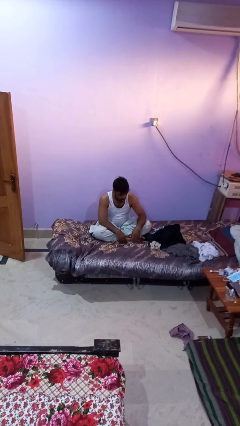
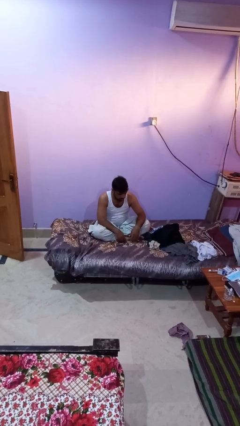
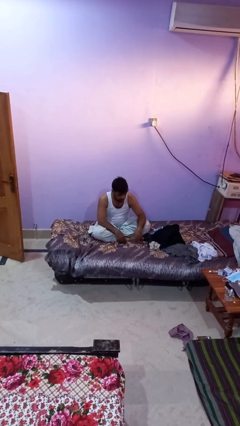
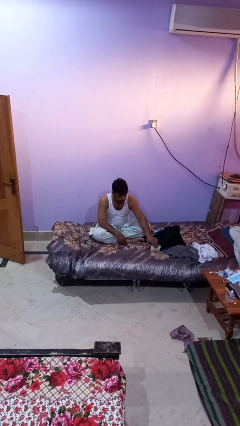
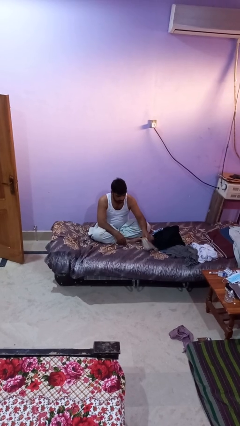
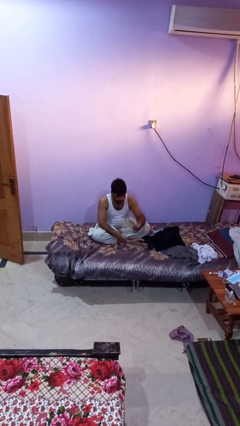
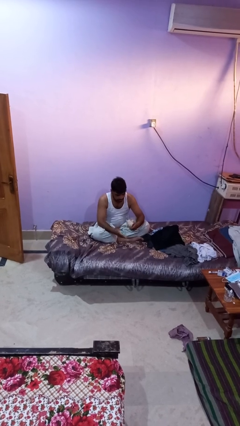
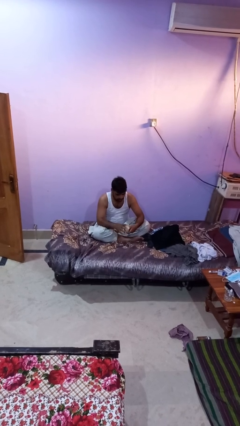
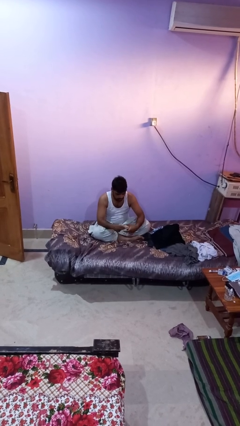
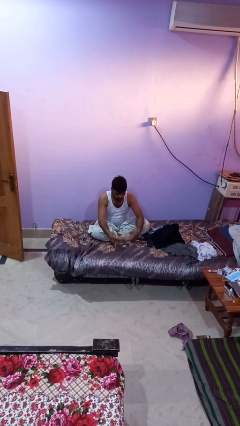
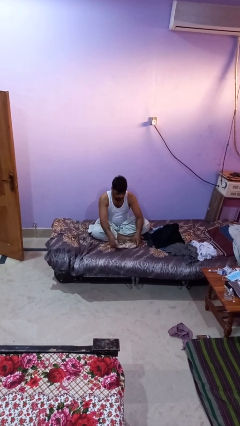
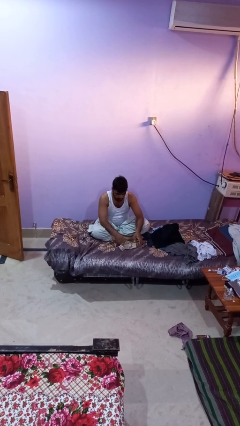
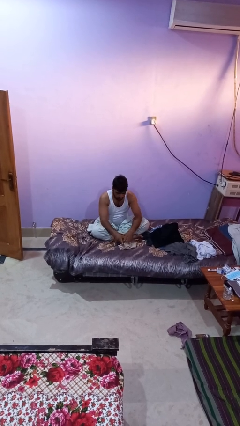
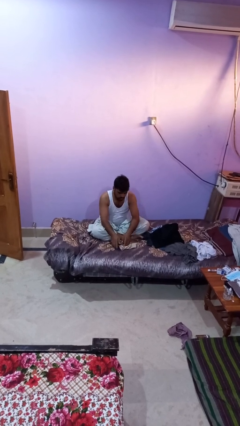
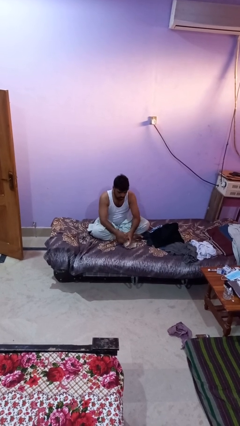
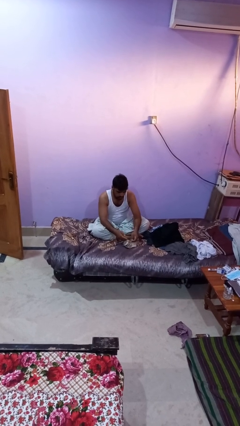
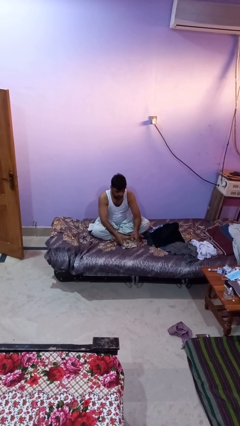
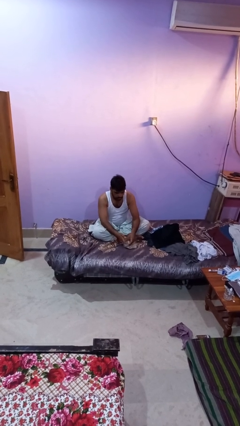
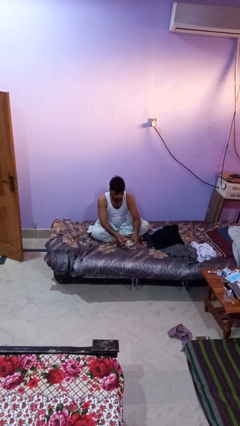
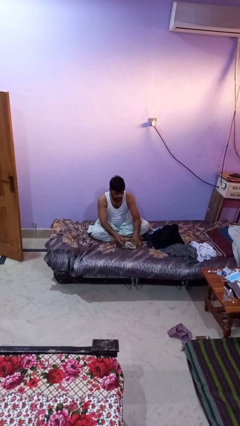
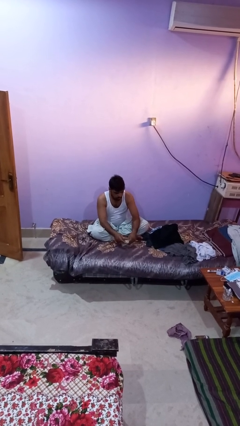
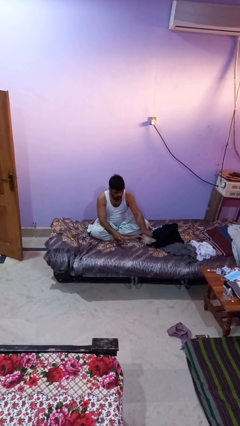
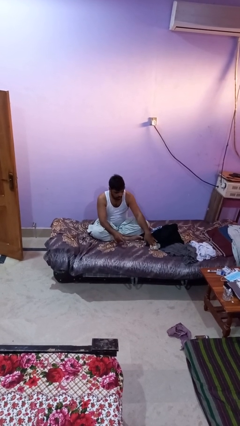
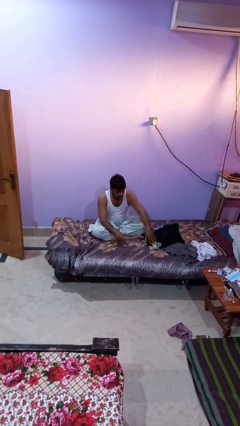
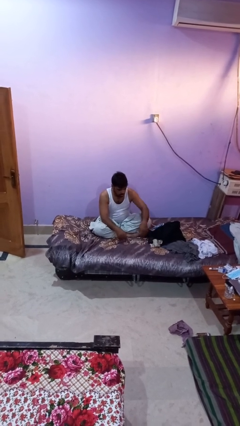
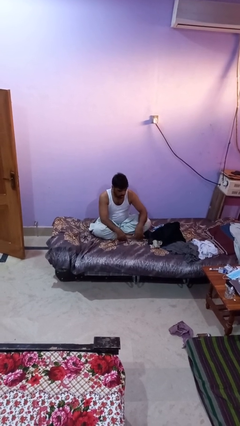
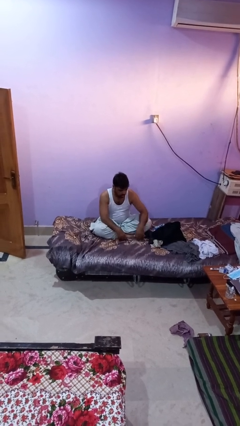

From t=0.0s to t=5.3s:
person folds socks

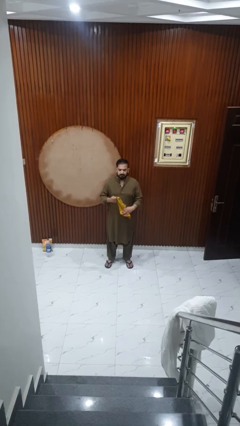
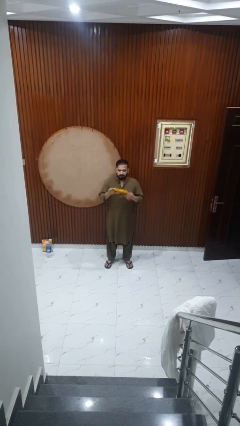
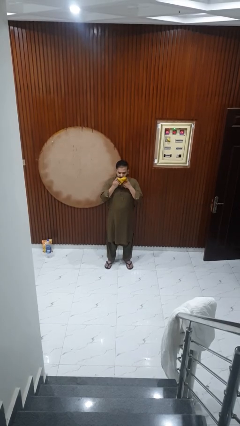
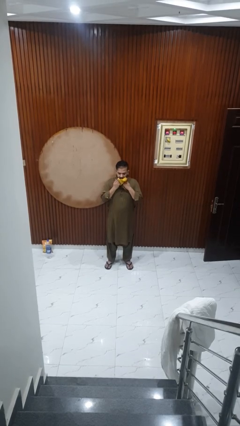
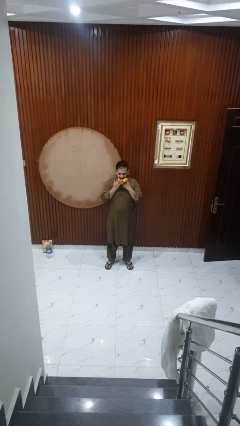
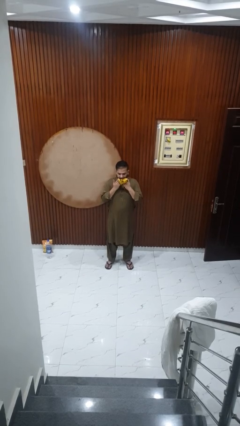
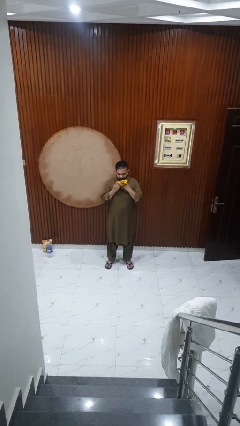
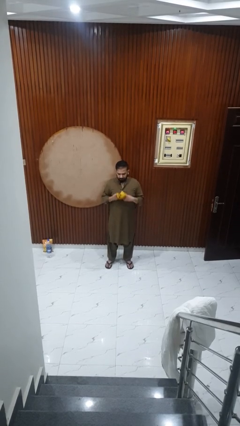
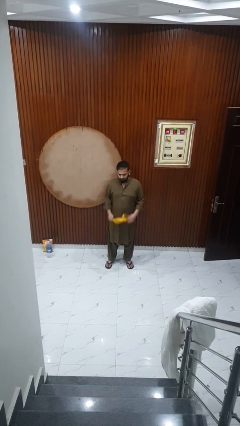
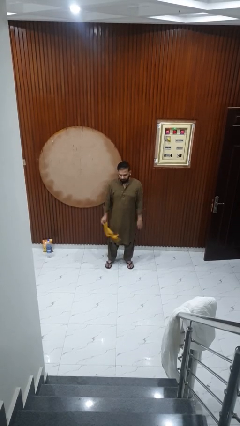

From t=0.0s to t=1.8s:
person wipes mouth with napkin

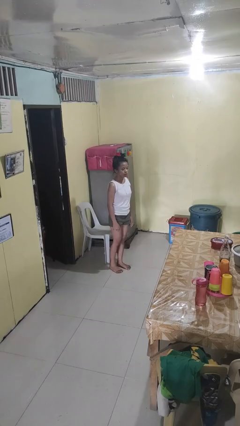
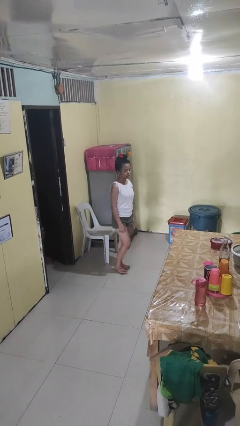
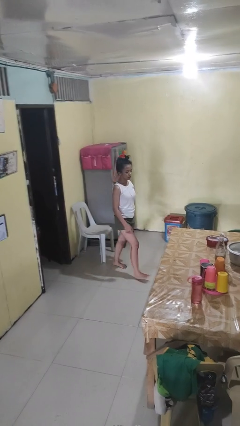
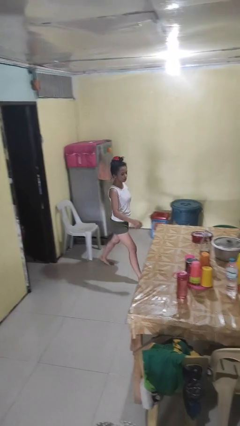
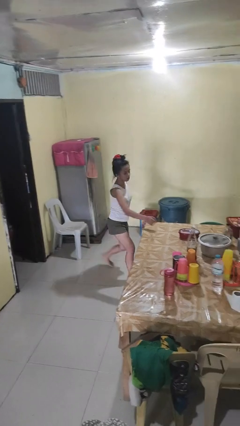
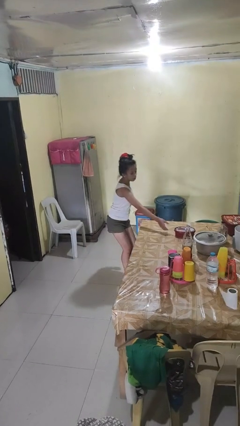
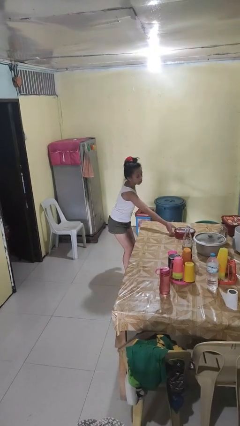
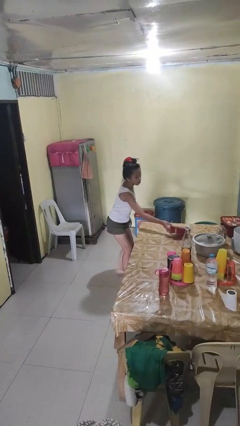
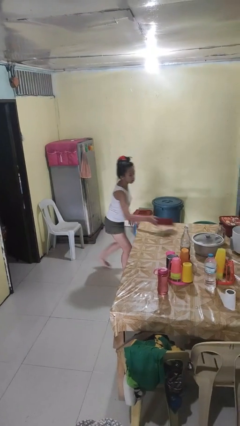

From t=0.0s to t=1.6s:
person picks up object from table

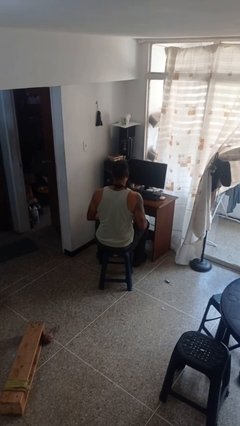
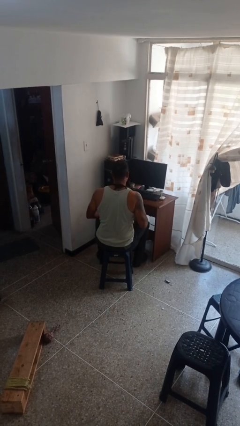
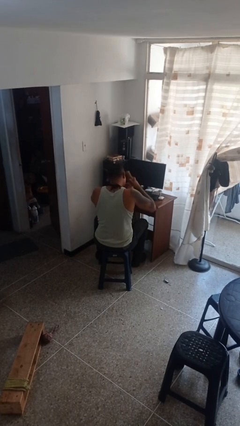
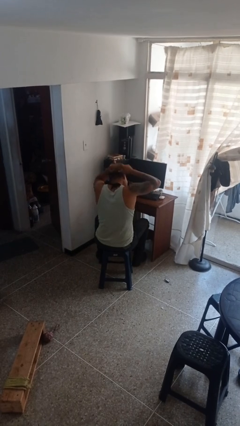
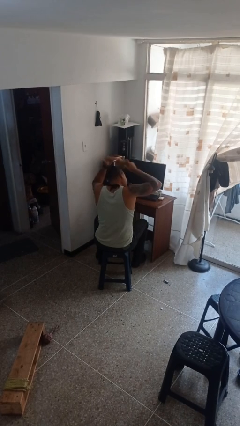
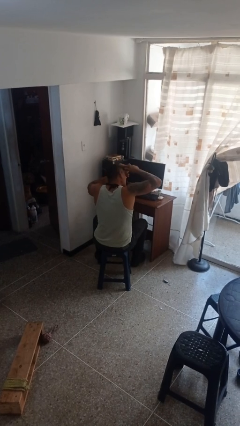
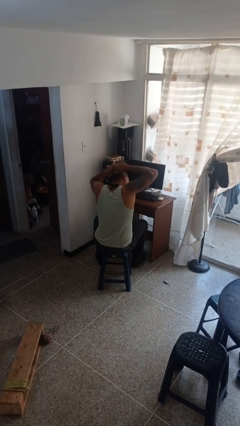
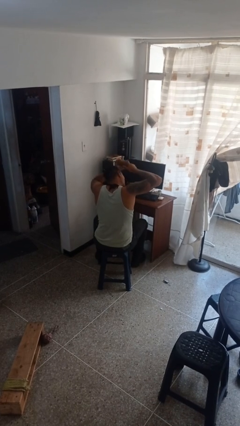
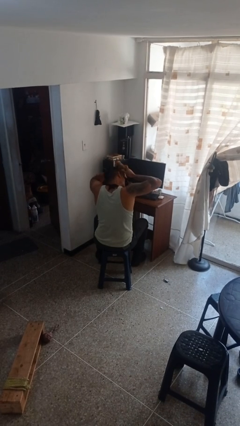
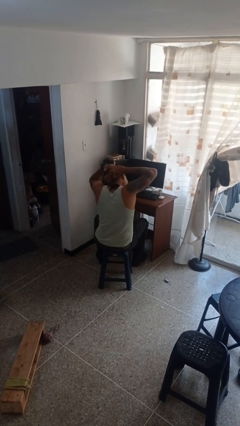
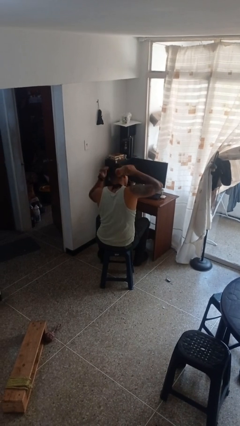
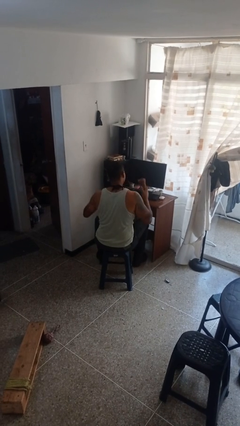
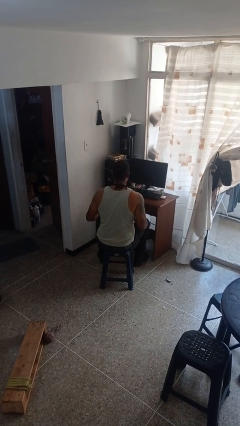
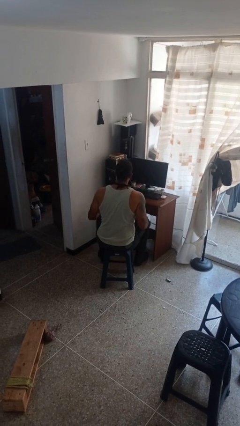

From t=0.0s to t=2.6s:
person brushes hair

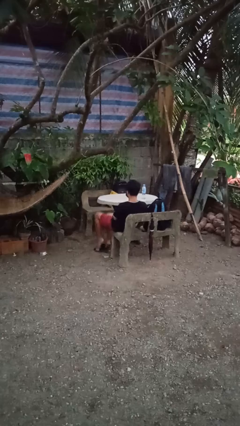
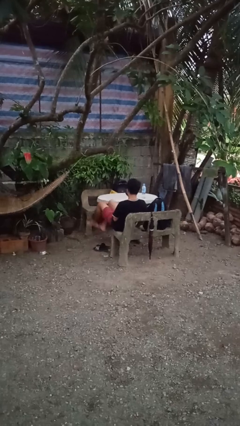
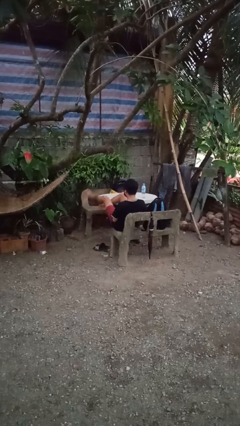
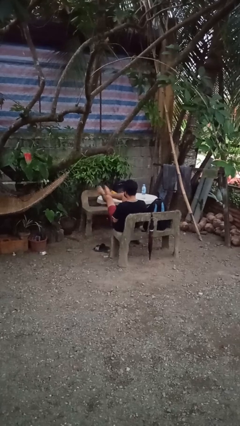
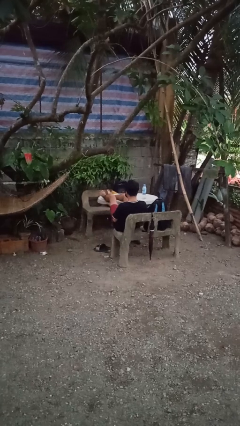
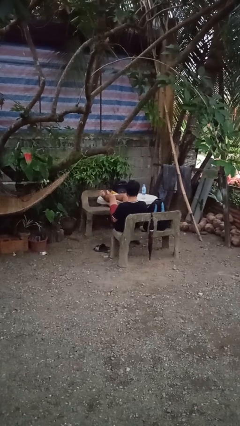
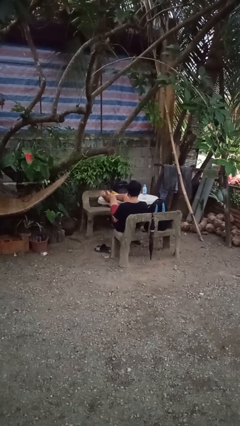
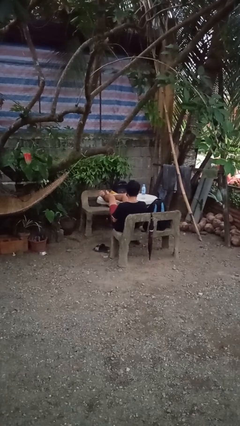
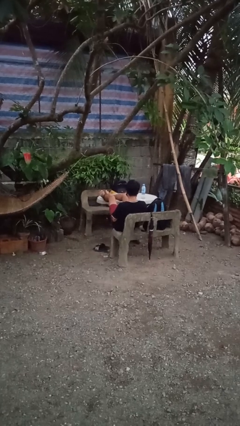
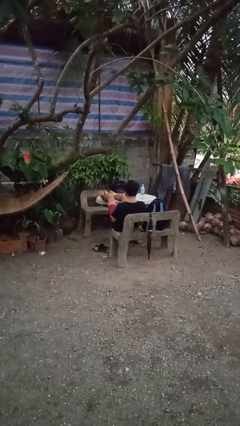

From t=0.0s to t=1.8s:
person puts feet up

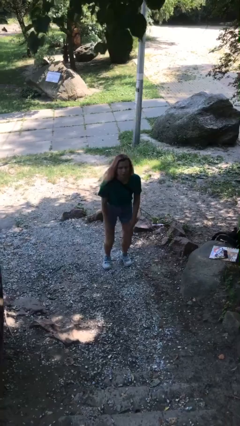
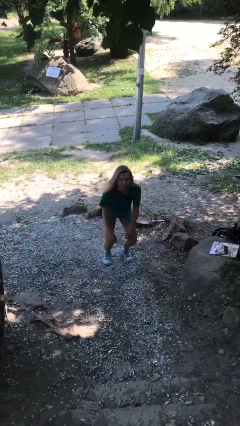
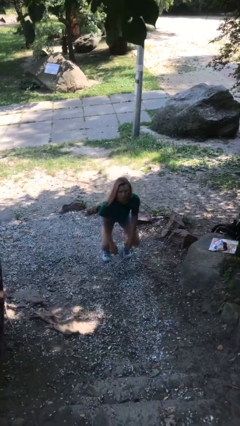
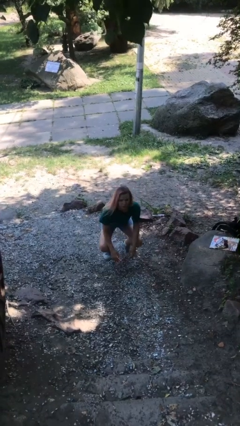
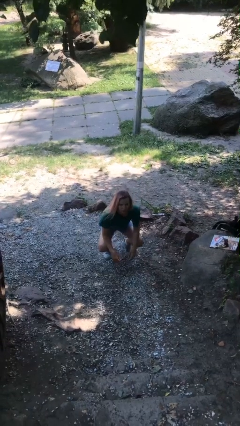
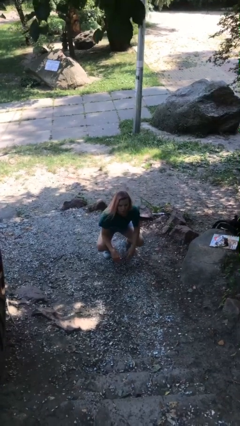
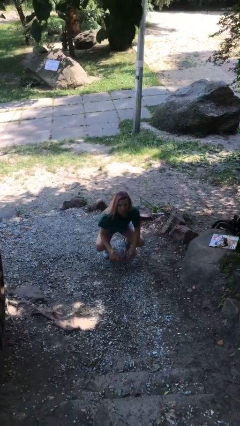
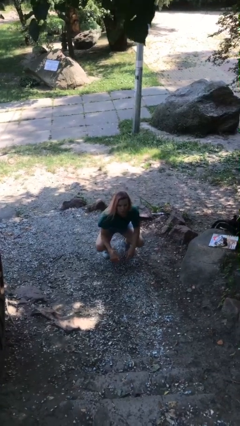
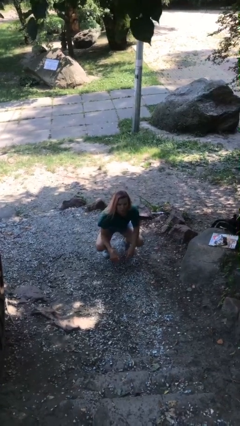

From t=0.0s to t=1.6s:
person squats

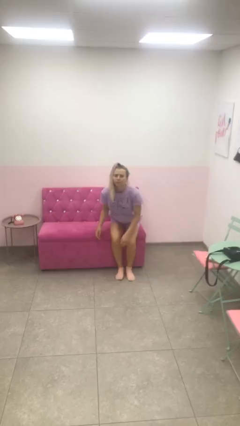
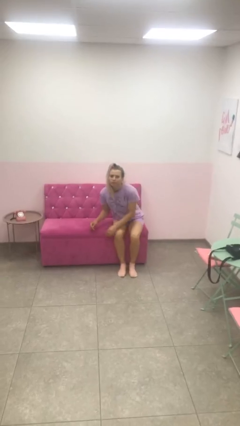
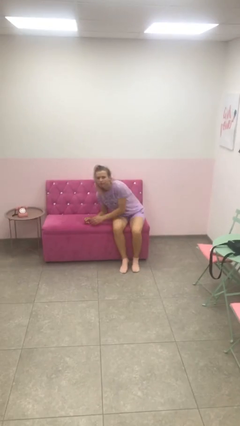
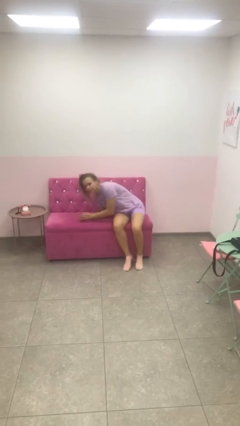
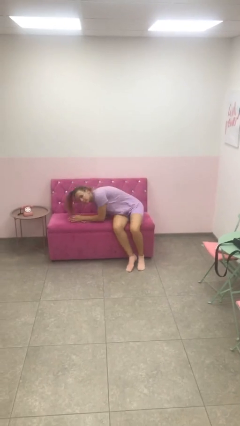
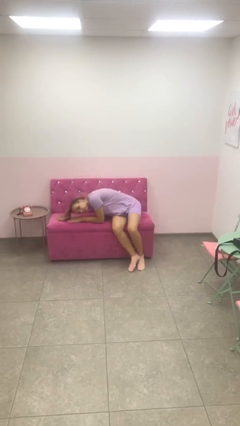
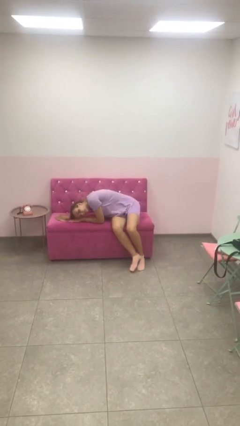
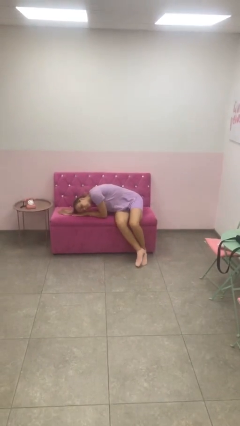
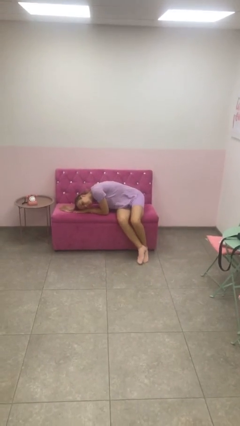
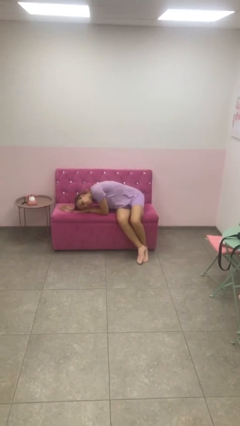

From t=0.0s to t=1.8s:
person lies down on couch

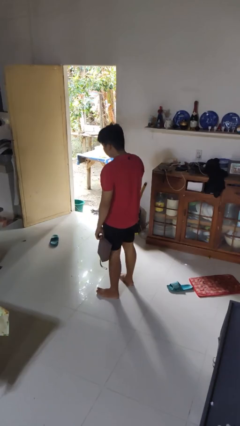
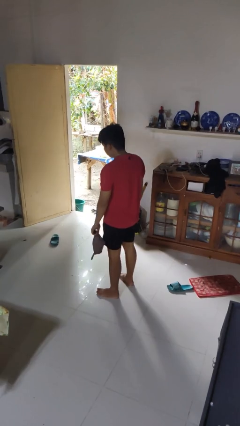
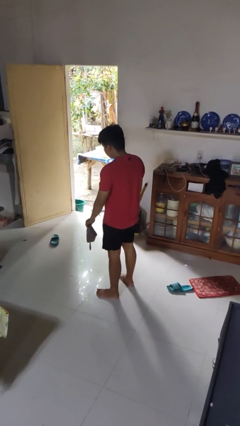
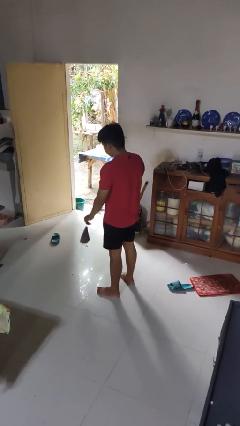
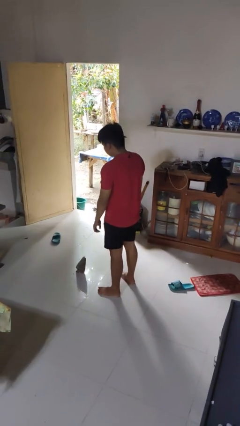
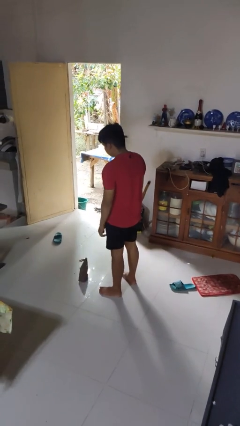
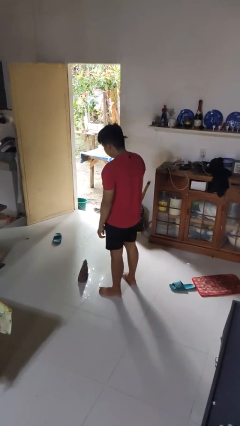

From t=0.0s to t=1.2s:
person throws object to ground
